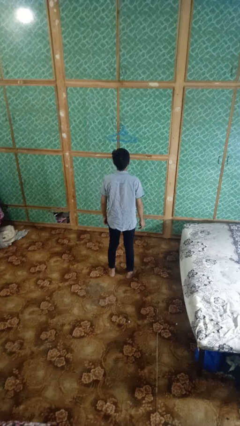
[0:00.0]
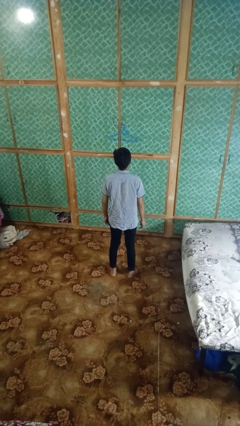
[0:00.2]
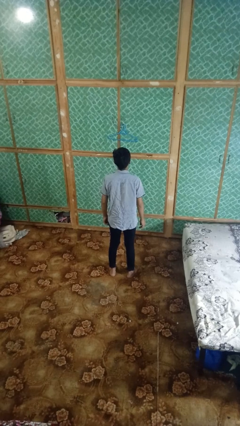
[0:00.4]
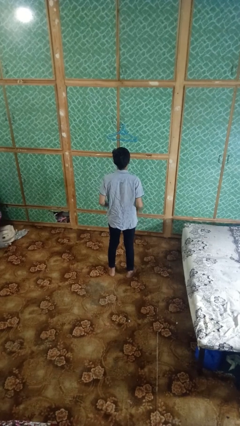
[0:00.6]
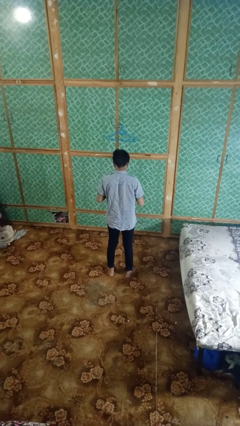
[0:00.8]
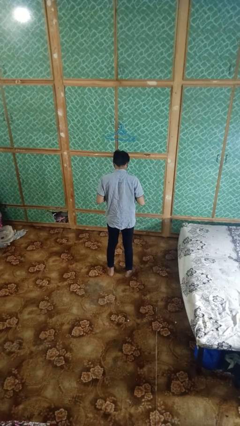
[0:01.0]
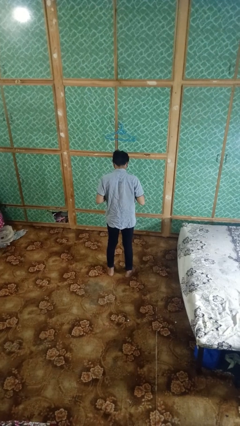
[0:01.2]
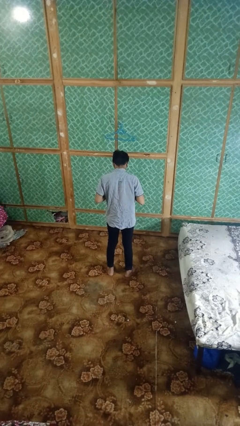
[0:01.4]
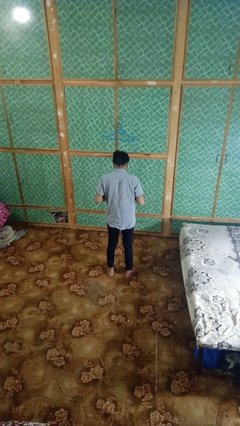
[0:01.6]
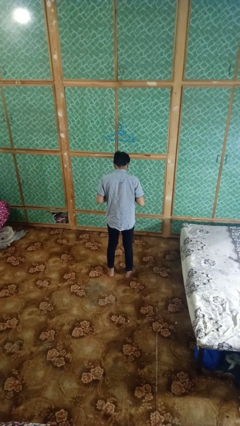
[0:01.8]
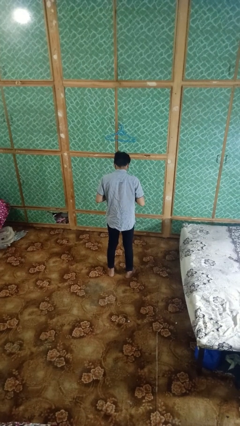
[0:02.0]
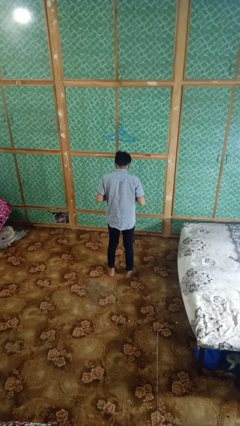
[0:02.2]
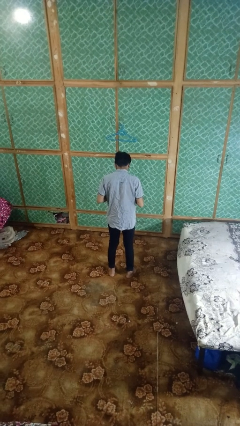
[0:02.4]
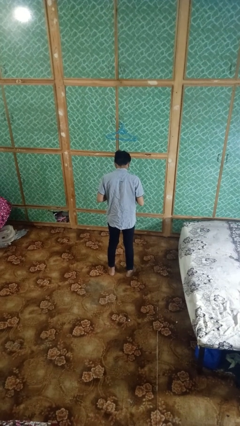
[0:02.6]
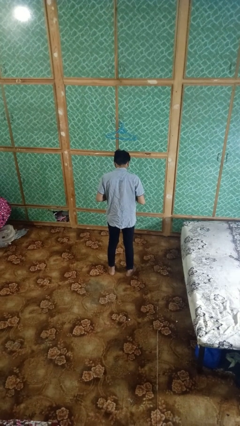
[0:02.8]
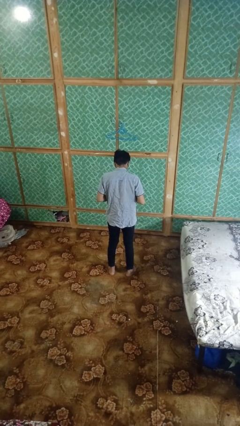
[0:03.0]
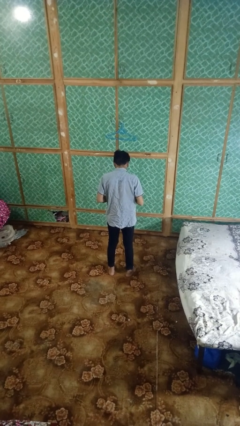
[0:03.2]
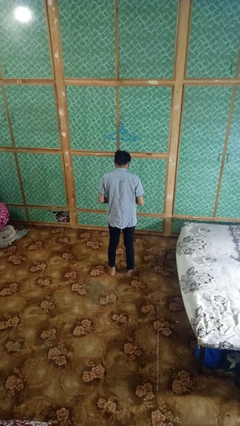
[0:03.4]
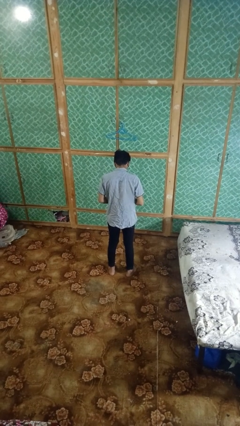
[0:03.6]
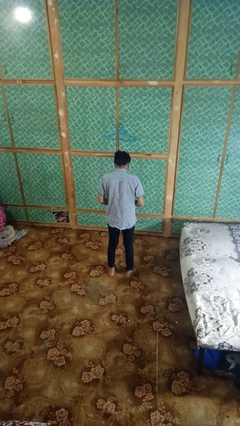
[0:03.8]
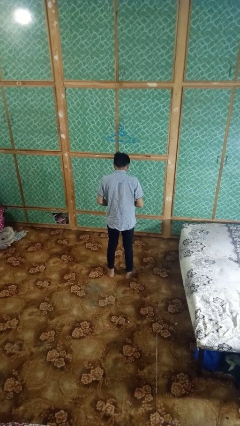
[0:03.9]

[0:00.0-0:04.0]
person unbuttons shirt

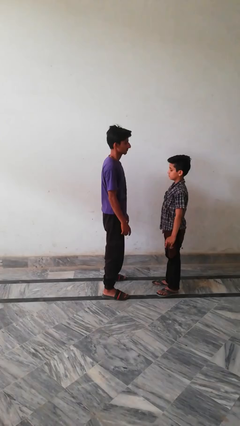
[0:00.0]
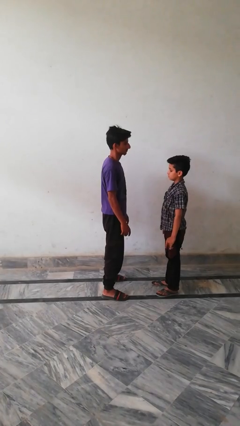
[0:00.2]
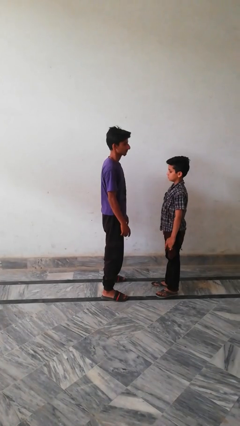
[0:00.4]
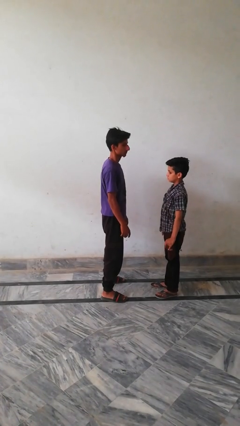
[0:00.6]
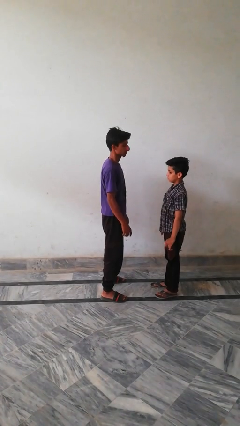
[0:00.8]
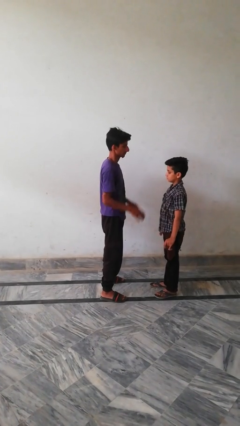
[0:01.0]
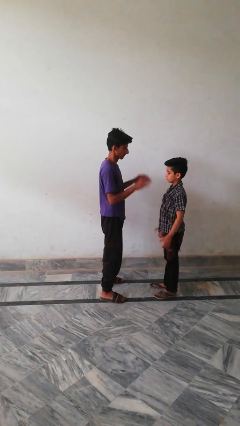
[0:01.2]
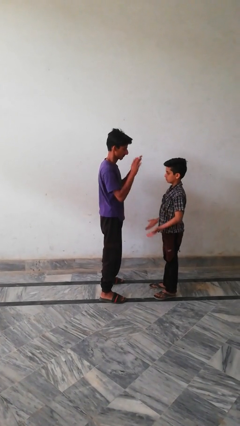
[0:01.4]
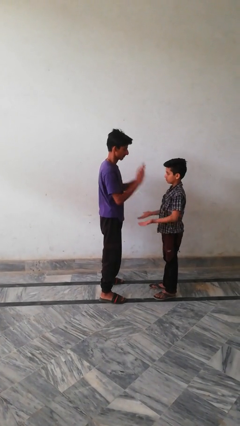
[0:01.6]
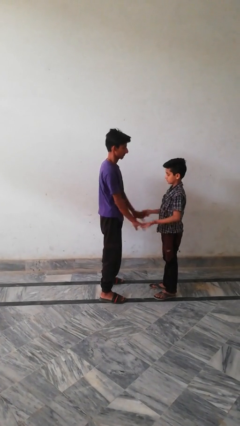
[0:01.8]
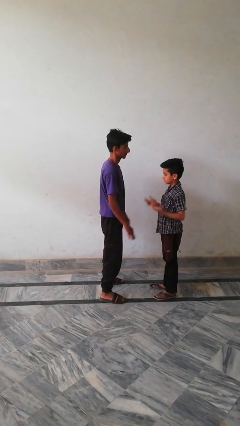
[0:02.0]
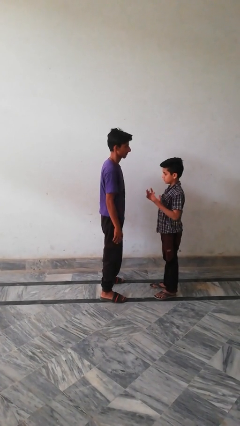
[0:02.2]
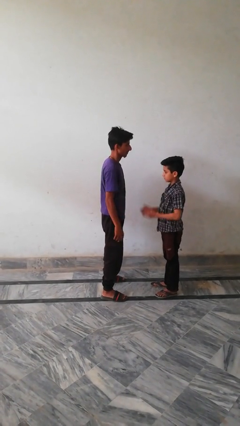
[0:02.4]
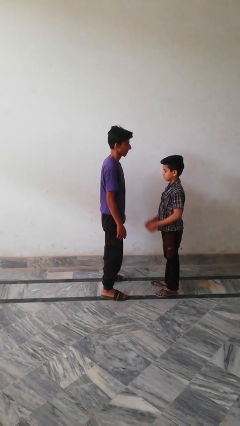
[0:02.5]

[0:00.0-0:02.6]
person highfives hand

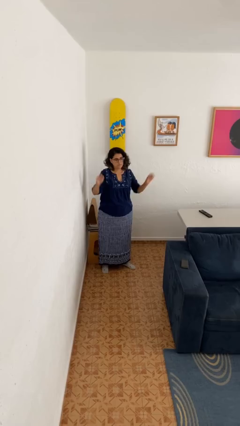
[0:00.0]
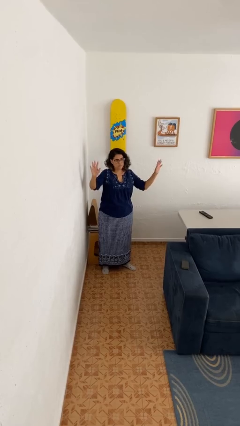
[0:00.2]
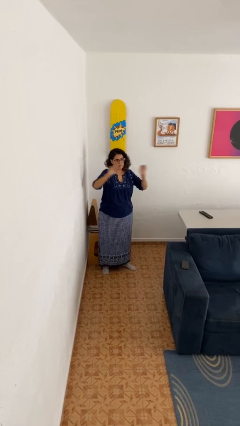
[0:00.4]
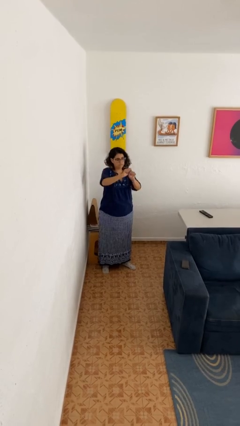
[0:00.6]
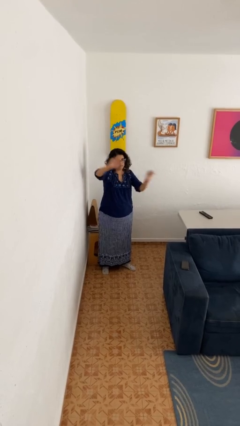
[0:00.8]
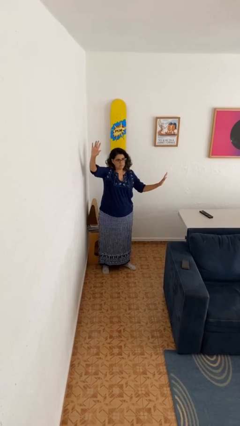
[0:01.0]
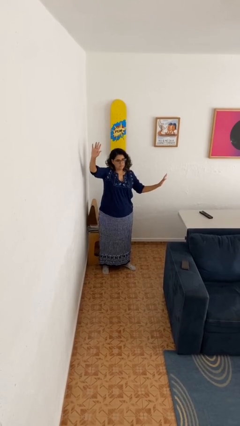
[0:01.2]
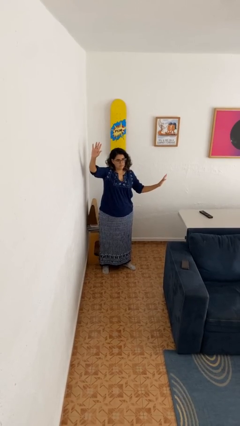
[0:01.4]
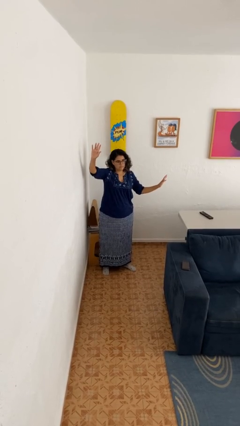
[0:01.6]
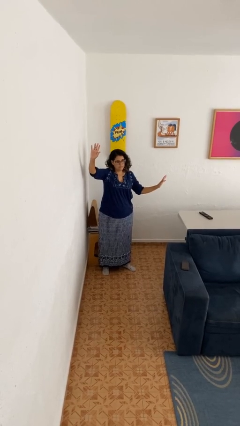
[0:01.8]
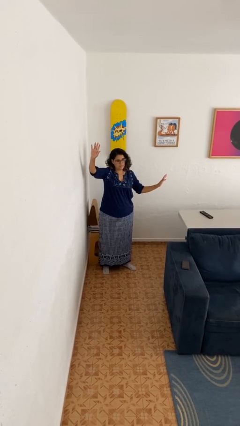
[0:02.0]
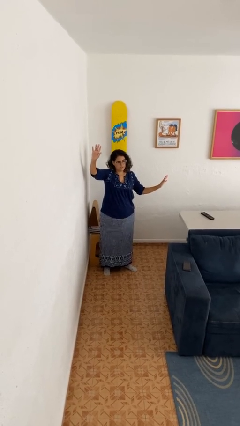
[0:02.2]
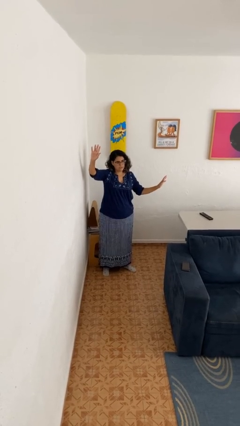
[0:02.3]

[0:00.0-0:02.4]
person gestures zoom in

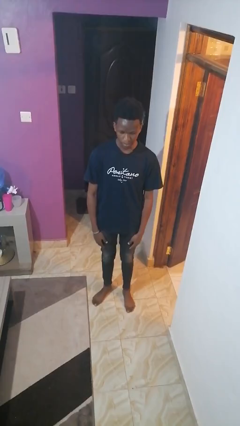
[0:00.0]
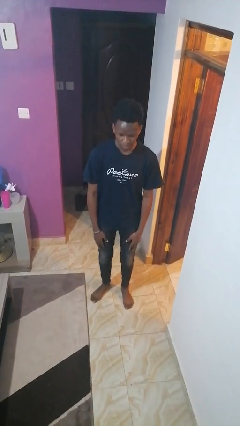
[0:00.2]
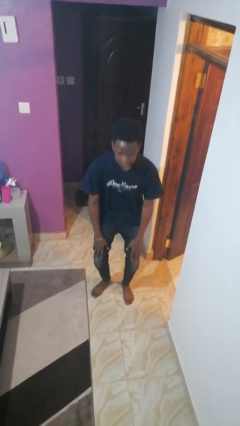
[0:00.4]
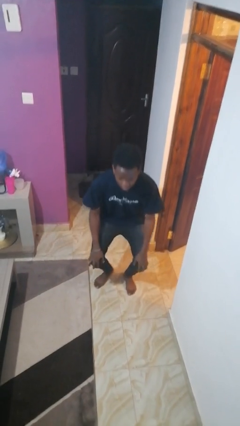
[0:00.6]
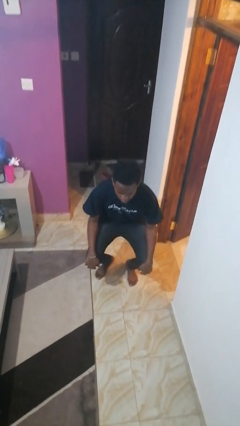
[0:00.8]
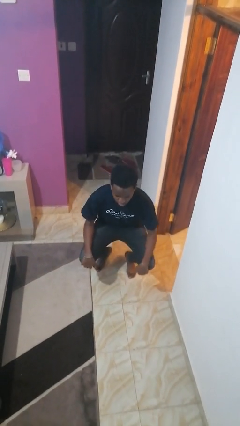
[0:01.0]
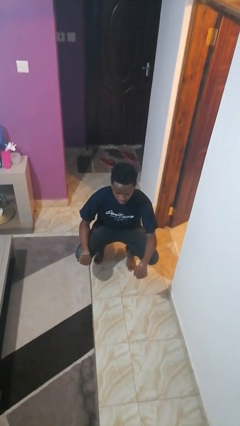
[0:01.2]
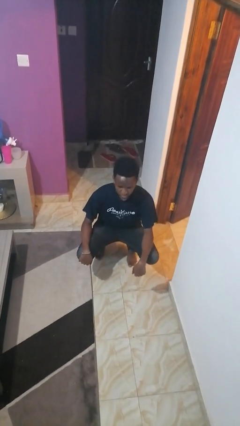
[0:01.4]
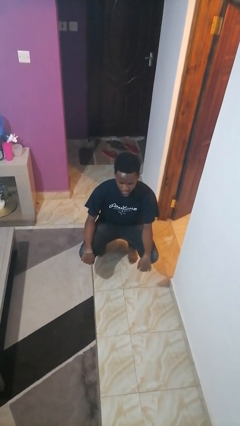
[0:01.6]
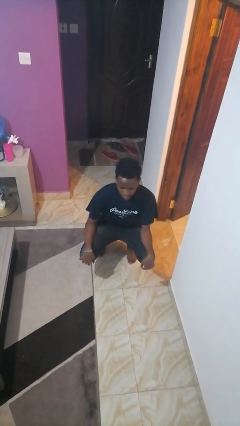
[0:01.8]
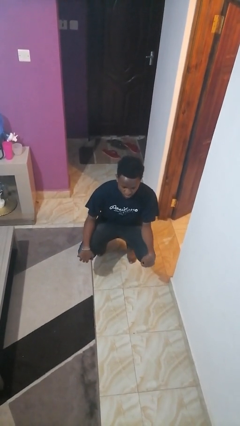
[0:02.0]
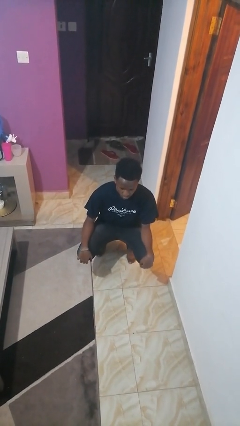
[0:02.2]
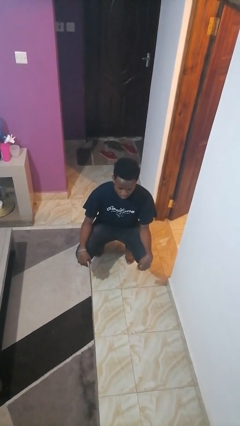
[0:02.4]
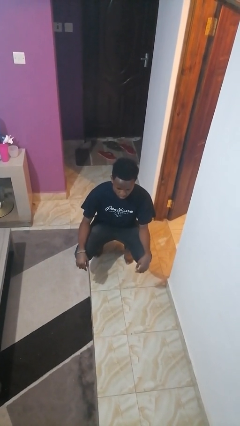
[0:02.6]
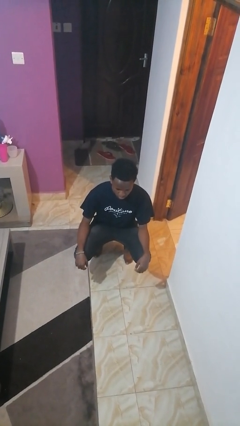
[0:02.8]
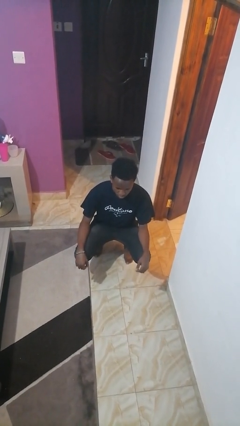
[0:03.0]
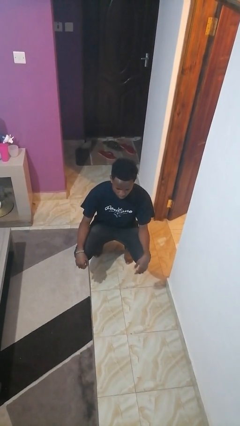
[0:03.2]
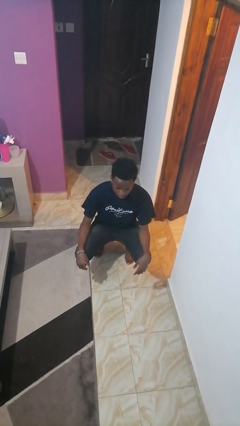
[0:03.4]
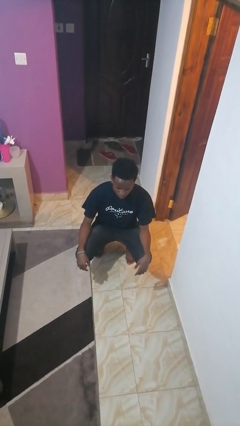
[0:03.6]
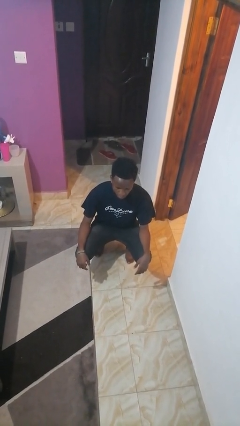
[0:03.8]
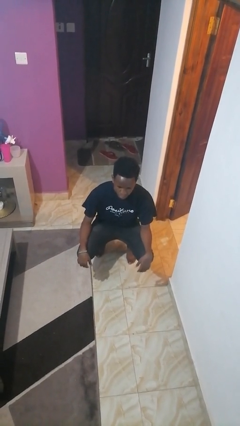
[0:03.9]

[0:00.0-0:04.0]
person squats

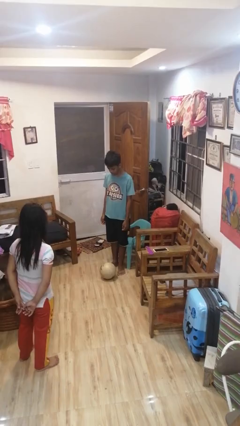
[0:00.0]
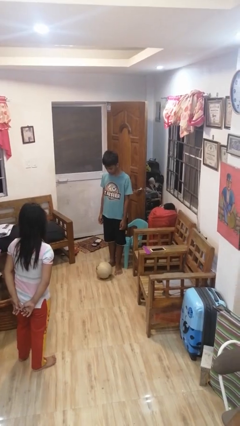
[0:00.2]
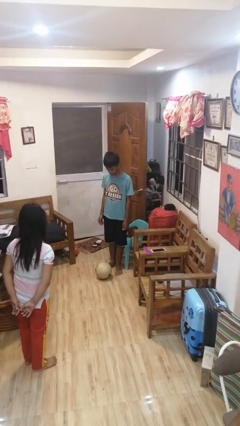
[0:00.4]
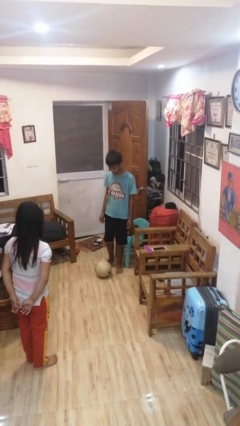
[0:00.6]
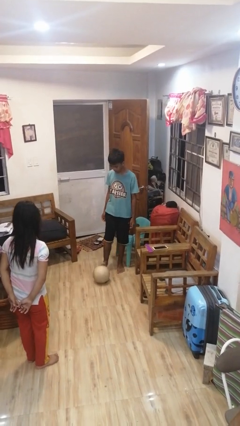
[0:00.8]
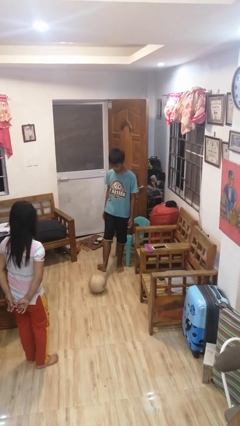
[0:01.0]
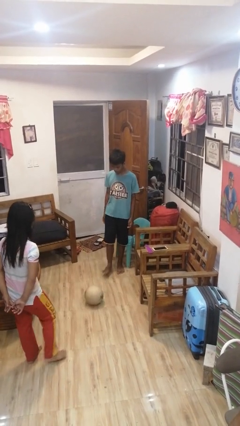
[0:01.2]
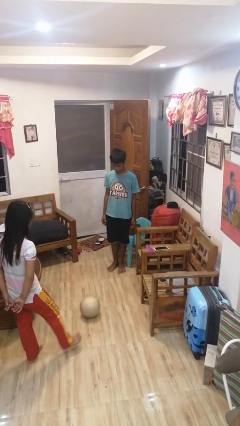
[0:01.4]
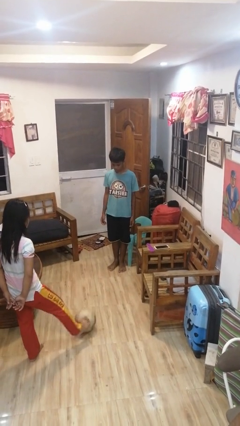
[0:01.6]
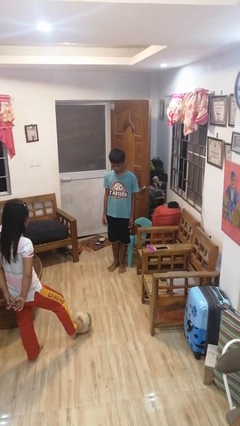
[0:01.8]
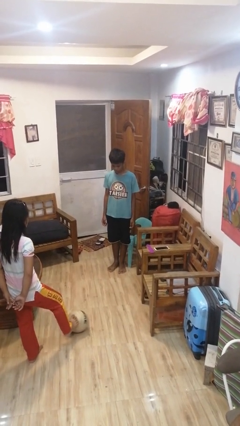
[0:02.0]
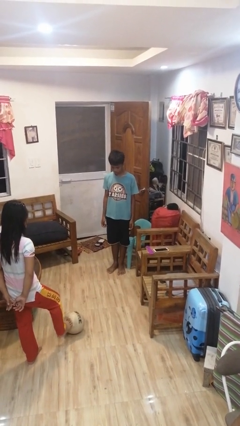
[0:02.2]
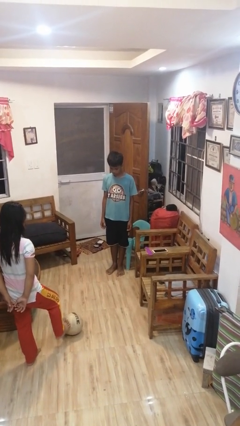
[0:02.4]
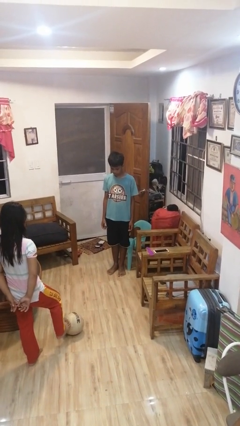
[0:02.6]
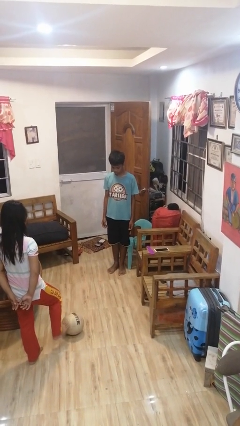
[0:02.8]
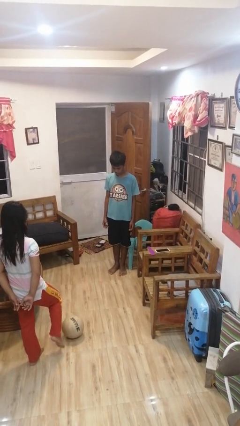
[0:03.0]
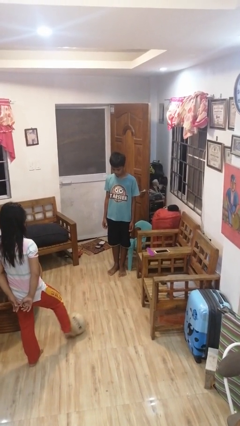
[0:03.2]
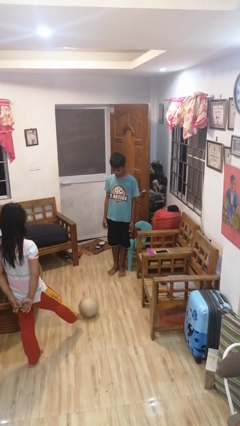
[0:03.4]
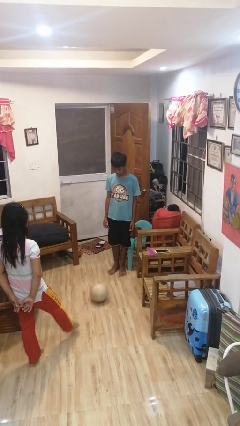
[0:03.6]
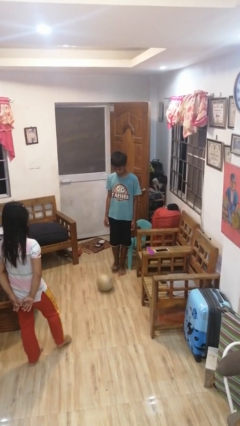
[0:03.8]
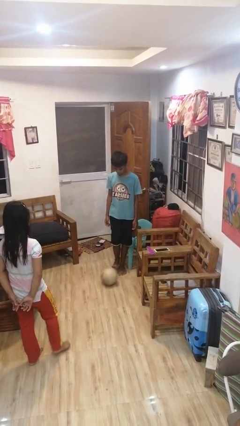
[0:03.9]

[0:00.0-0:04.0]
person kicks object to person
